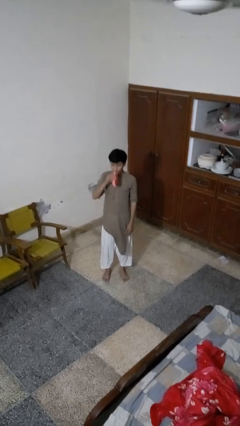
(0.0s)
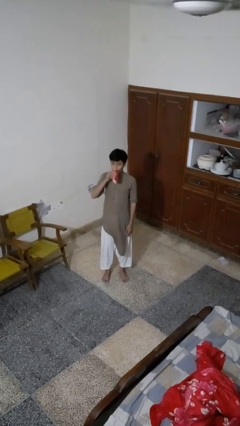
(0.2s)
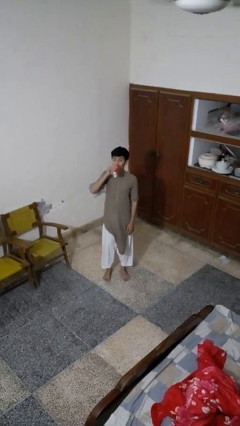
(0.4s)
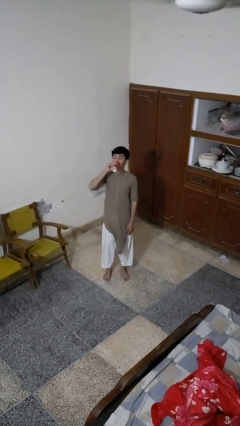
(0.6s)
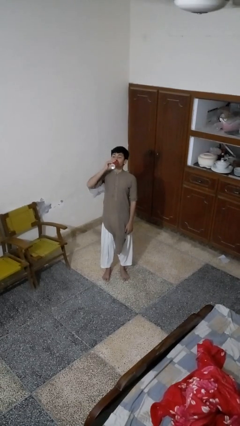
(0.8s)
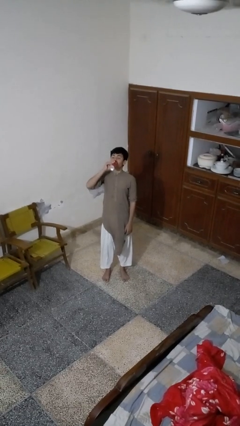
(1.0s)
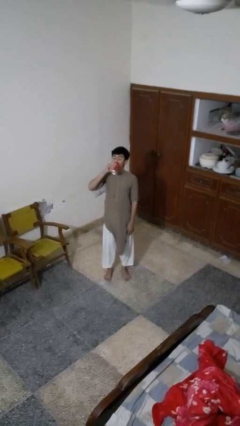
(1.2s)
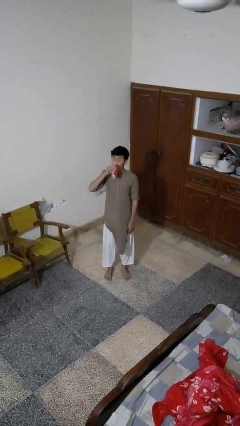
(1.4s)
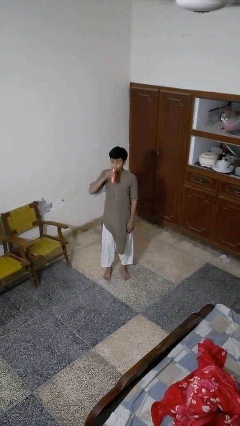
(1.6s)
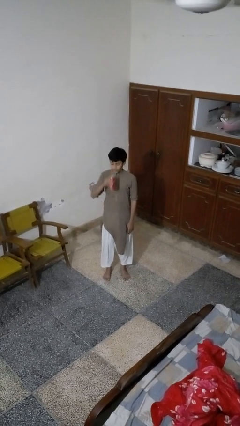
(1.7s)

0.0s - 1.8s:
person drinks from beverage can

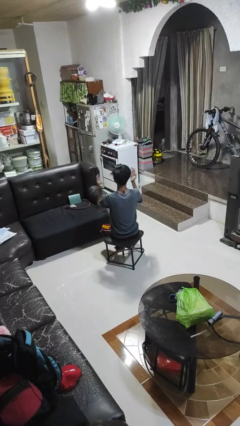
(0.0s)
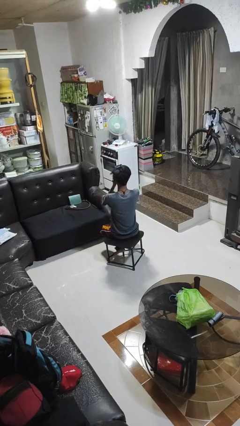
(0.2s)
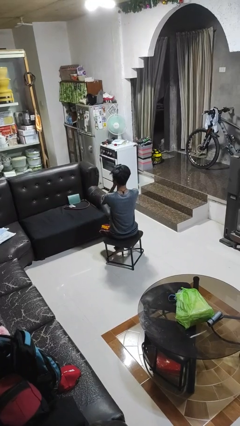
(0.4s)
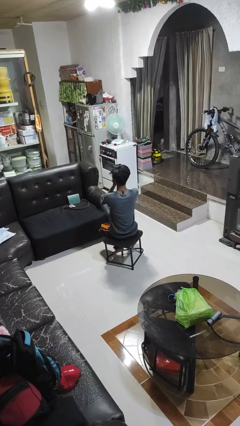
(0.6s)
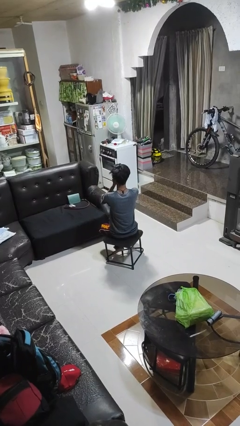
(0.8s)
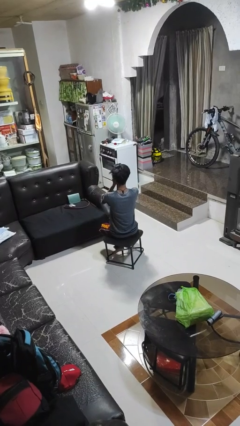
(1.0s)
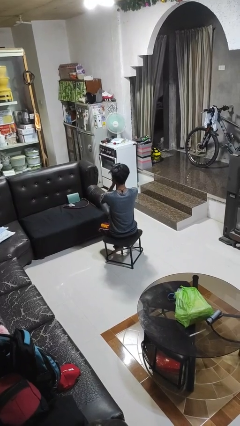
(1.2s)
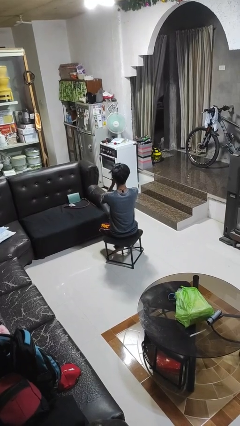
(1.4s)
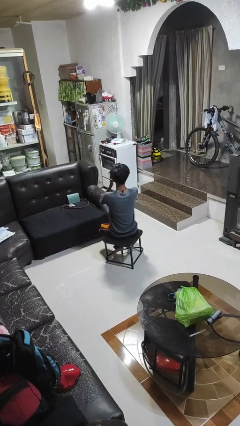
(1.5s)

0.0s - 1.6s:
person covers face with hands

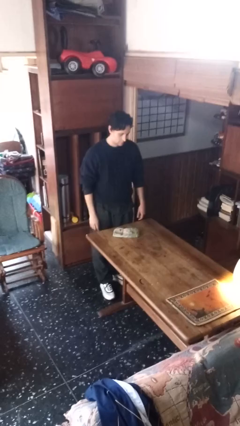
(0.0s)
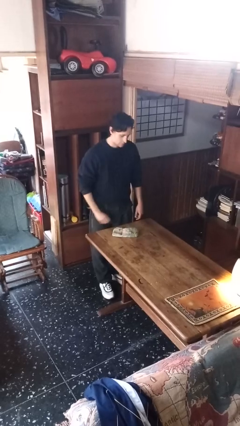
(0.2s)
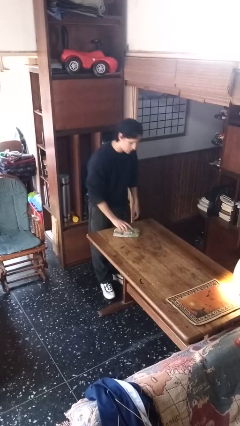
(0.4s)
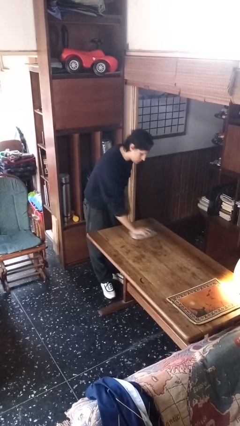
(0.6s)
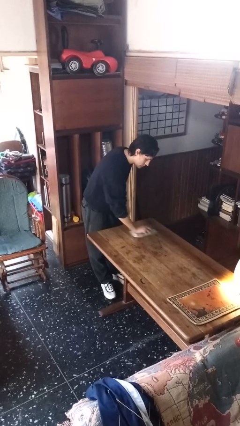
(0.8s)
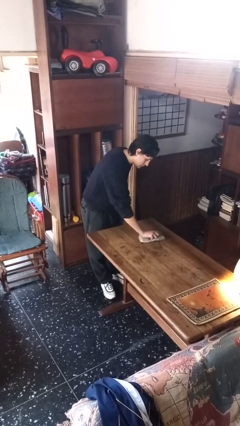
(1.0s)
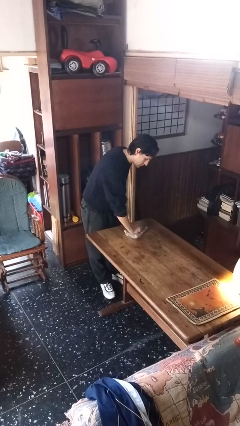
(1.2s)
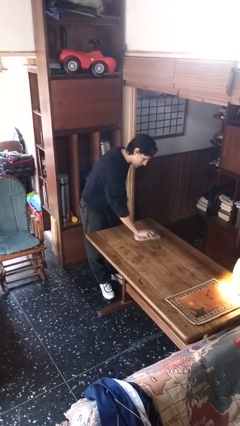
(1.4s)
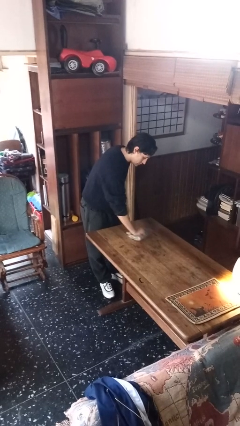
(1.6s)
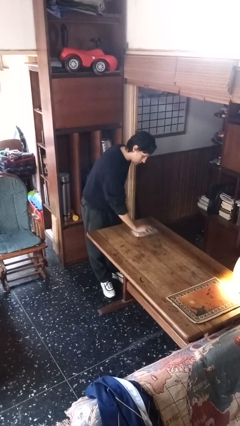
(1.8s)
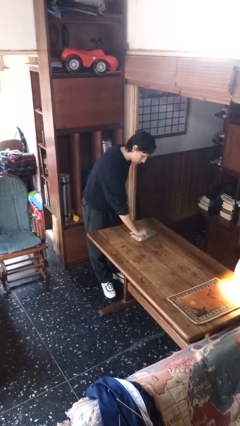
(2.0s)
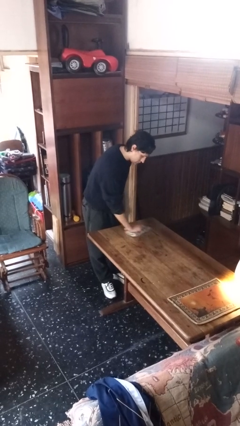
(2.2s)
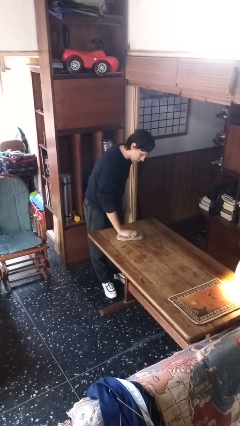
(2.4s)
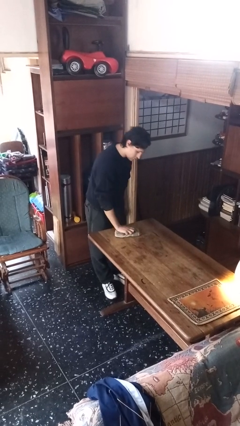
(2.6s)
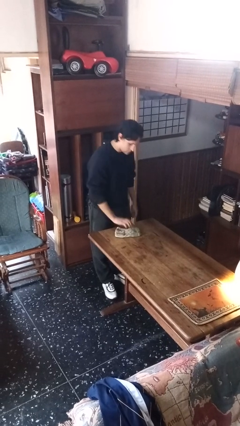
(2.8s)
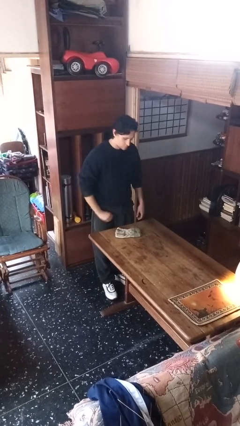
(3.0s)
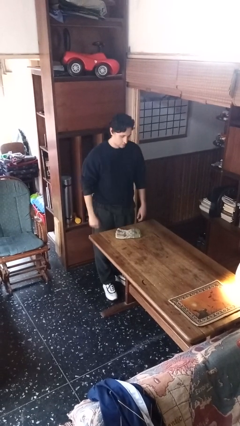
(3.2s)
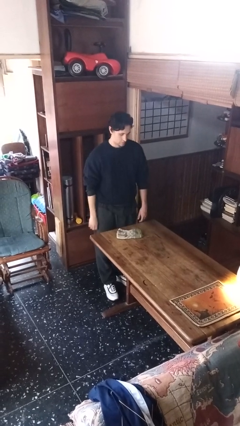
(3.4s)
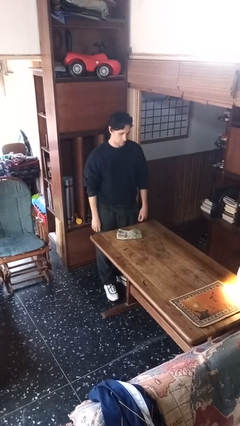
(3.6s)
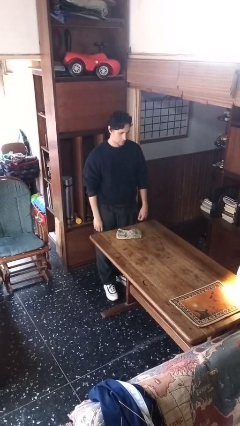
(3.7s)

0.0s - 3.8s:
person cleans table with rag

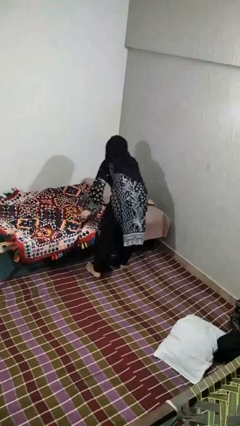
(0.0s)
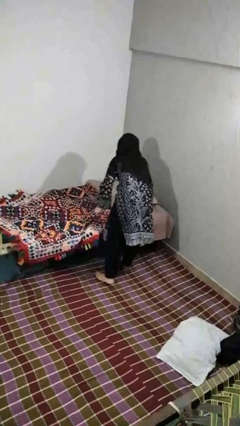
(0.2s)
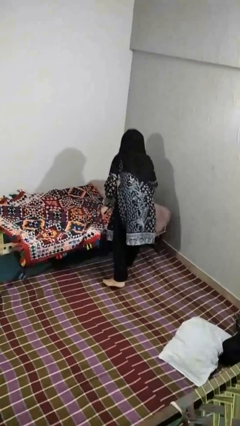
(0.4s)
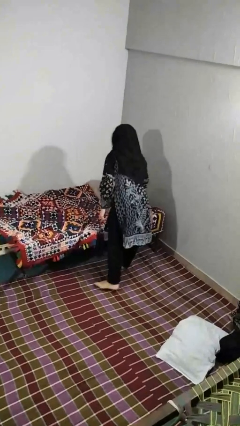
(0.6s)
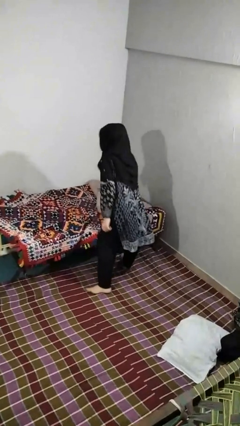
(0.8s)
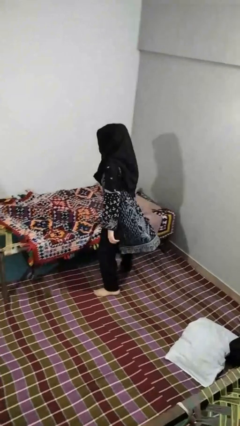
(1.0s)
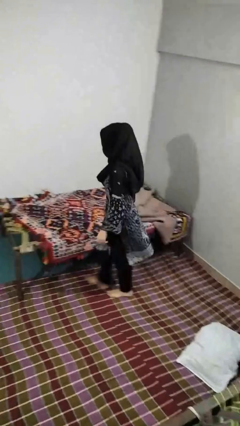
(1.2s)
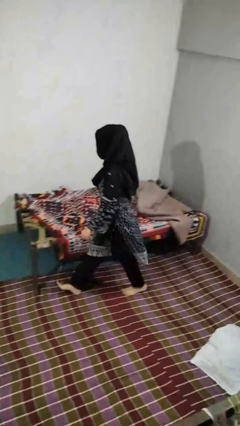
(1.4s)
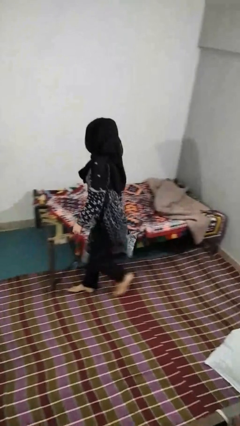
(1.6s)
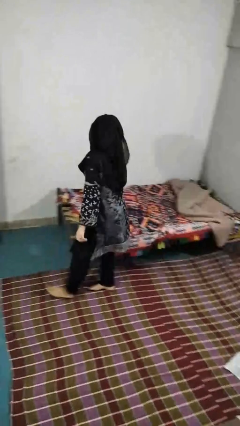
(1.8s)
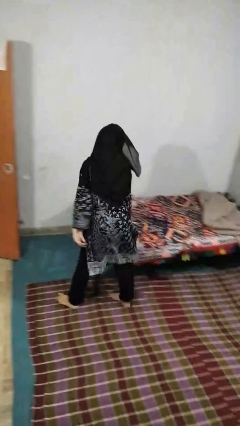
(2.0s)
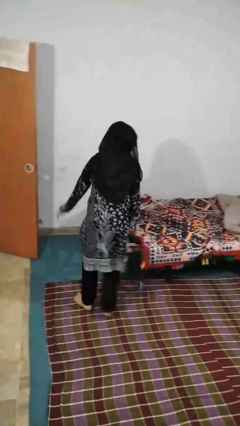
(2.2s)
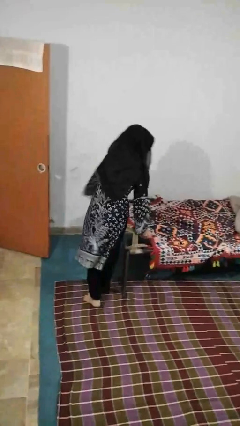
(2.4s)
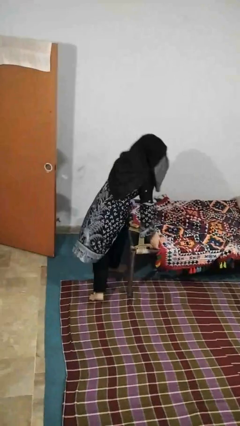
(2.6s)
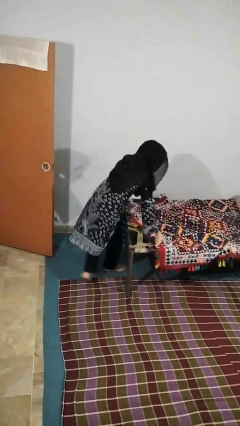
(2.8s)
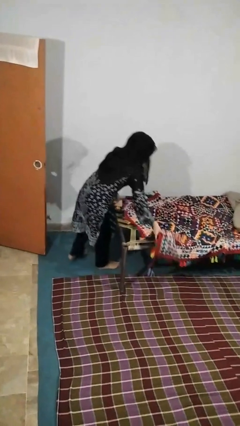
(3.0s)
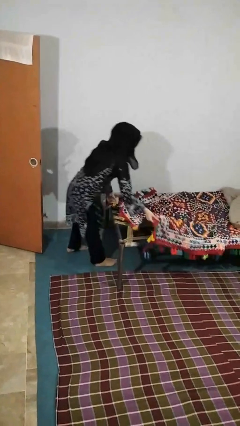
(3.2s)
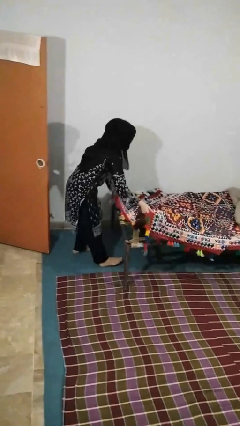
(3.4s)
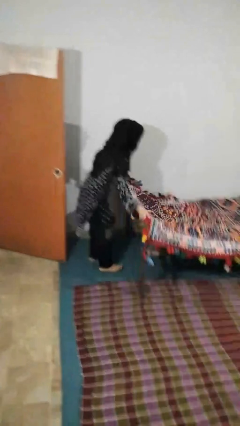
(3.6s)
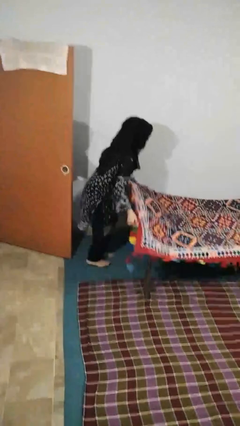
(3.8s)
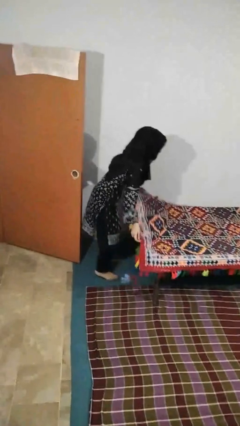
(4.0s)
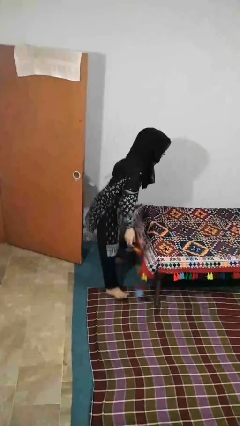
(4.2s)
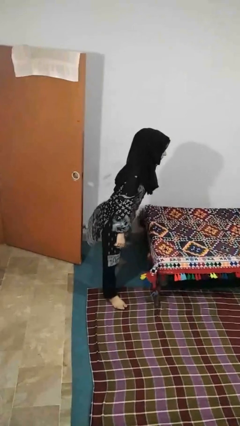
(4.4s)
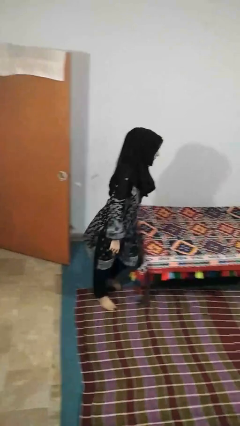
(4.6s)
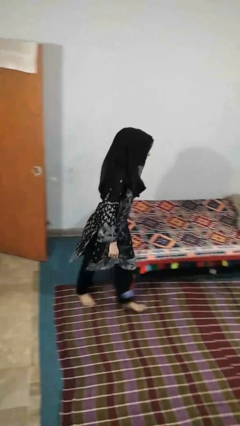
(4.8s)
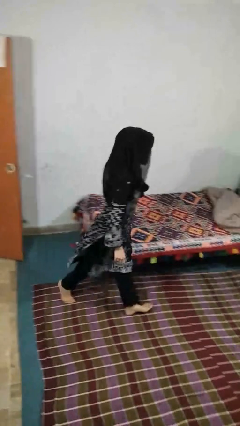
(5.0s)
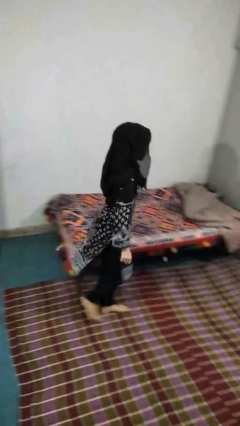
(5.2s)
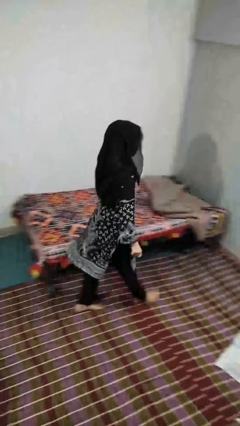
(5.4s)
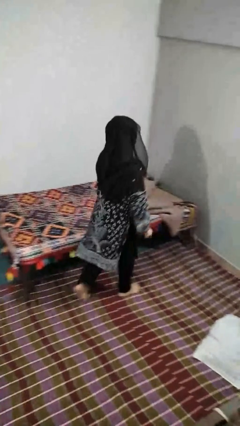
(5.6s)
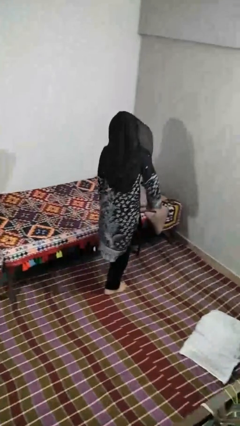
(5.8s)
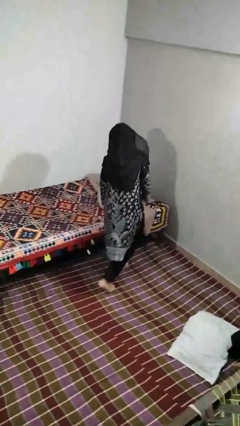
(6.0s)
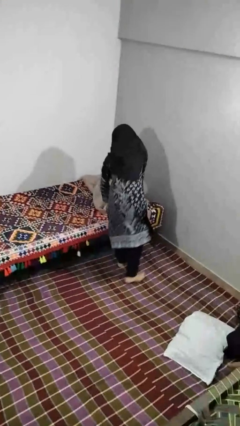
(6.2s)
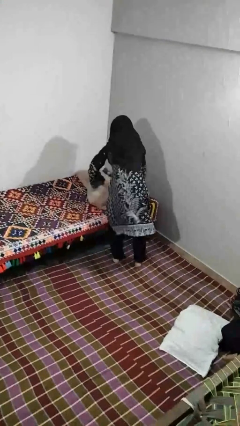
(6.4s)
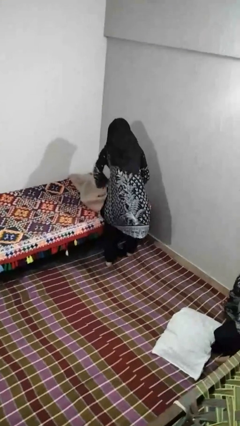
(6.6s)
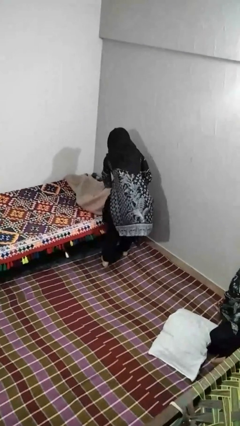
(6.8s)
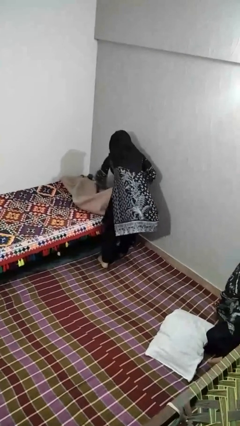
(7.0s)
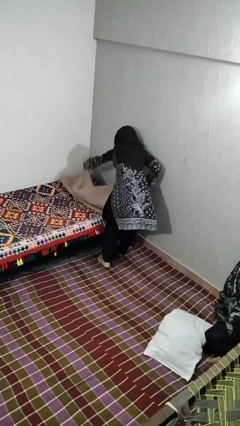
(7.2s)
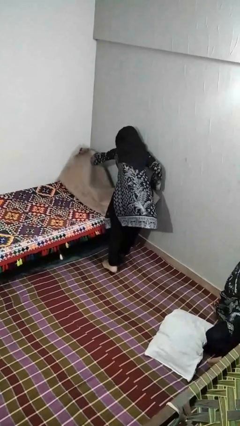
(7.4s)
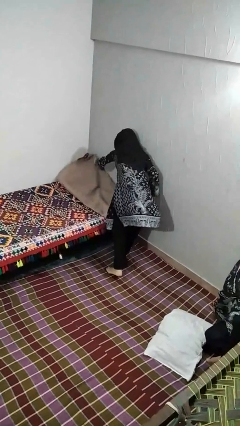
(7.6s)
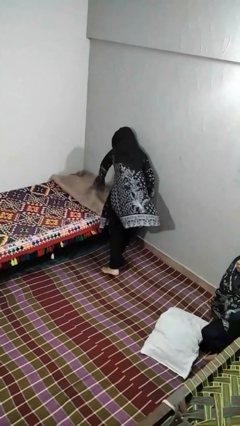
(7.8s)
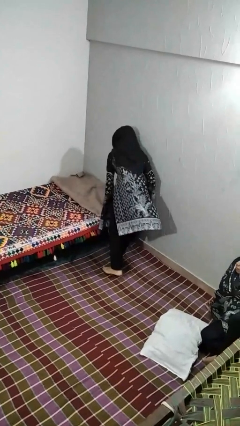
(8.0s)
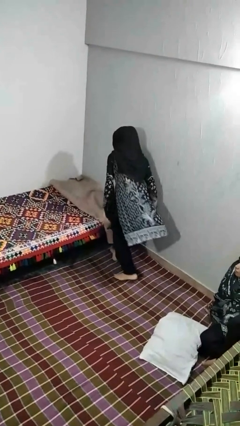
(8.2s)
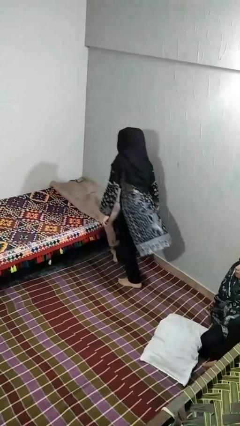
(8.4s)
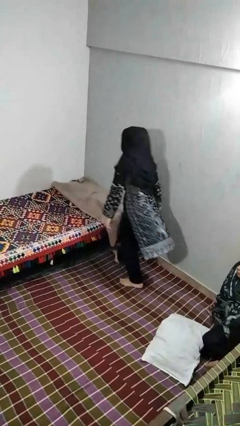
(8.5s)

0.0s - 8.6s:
person makes bed

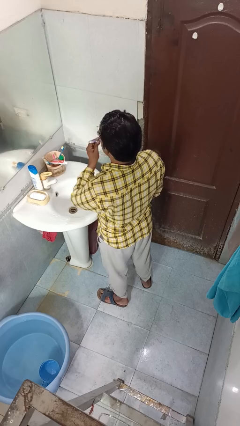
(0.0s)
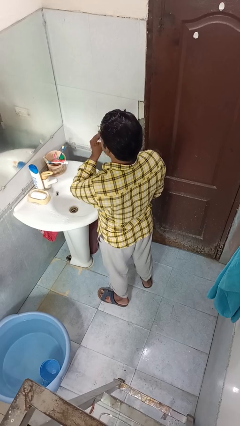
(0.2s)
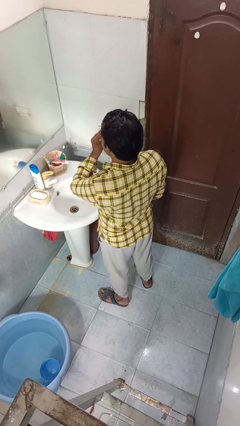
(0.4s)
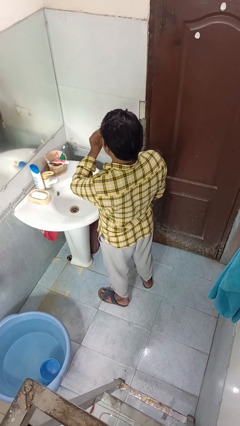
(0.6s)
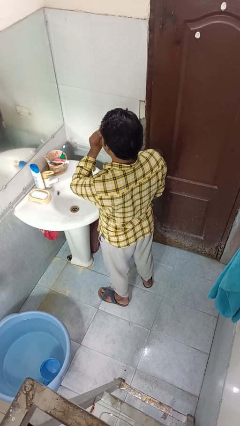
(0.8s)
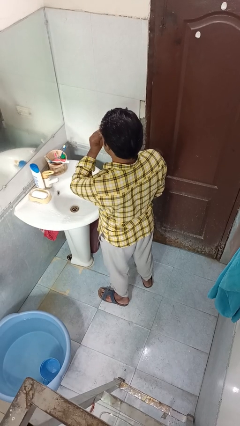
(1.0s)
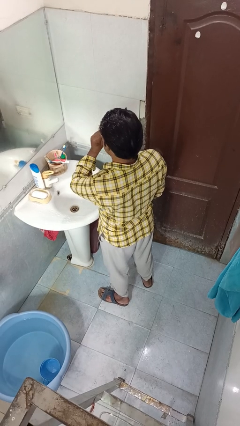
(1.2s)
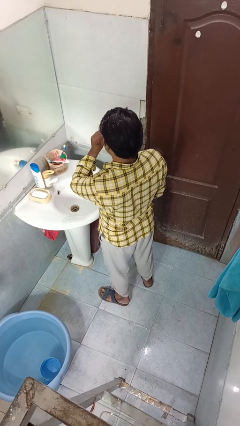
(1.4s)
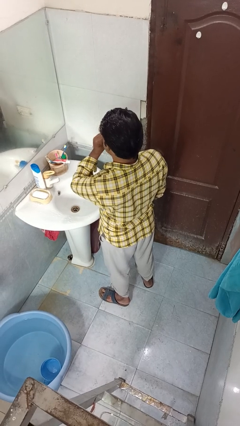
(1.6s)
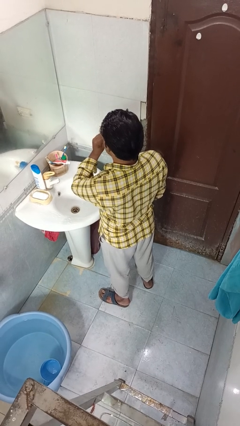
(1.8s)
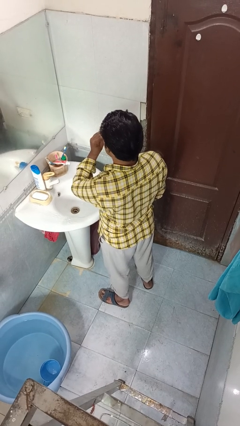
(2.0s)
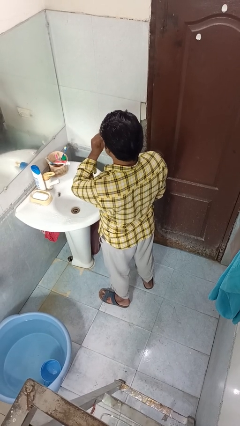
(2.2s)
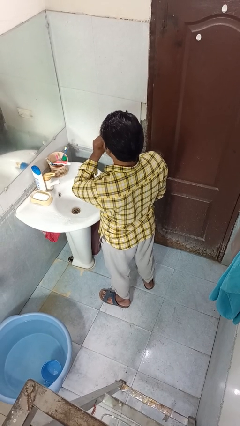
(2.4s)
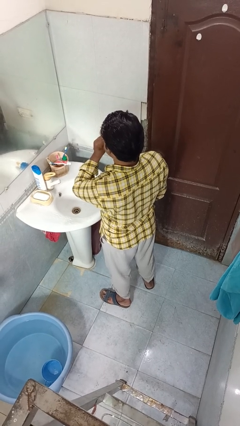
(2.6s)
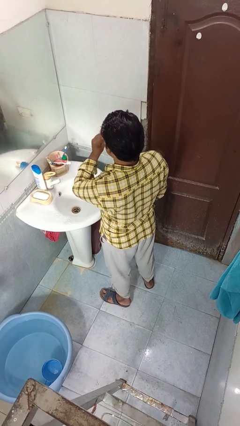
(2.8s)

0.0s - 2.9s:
person brushes teeth
